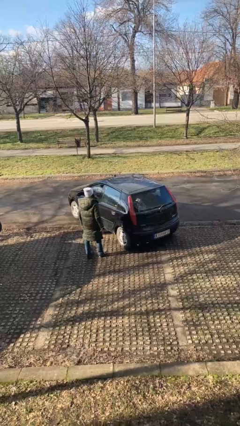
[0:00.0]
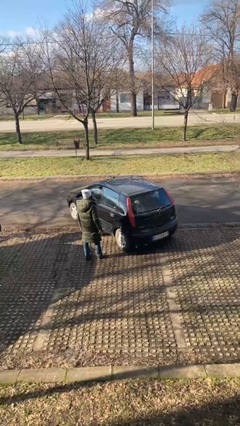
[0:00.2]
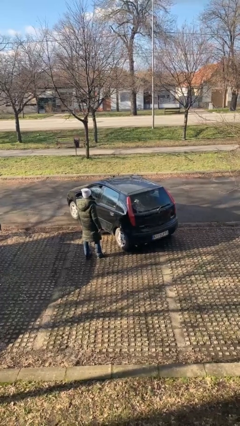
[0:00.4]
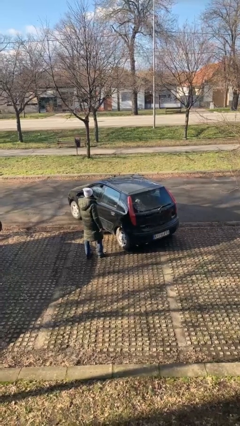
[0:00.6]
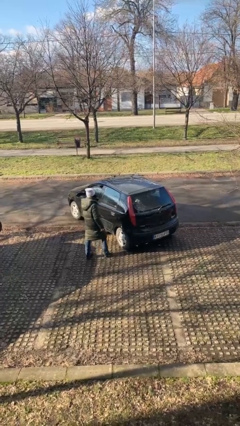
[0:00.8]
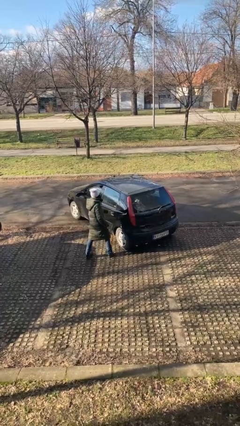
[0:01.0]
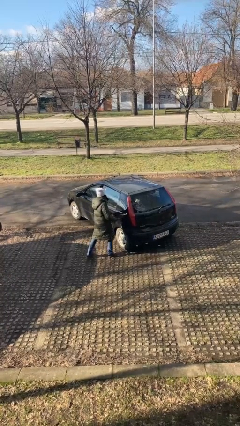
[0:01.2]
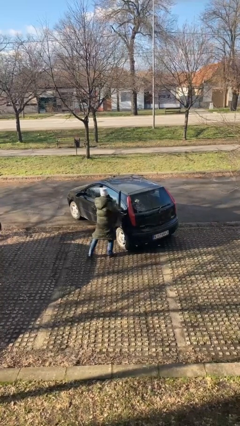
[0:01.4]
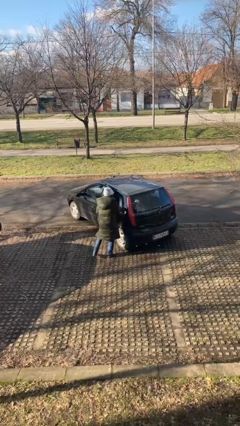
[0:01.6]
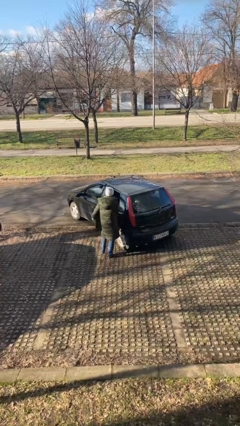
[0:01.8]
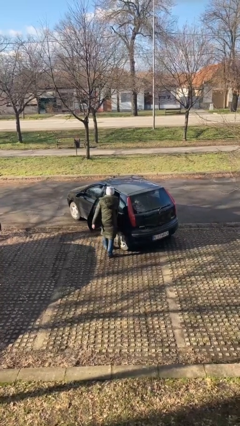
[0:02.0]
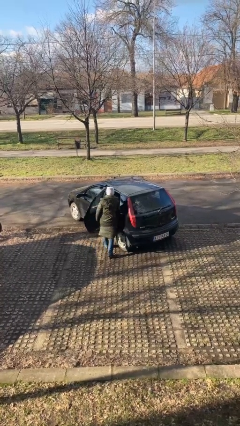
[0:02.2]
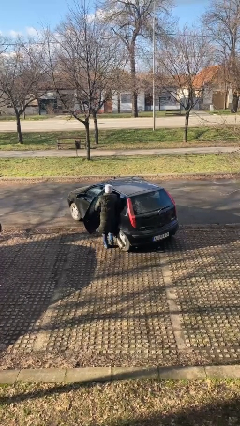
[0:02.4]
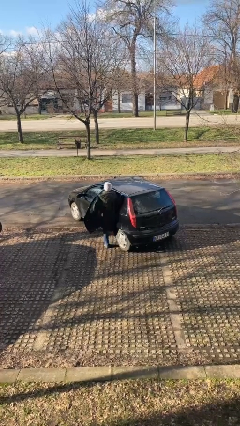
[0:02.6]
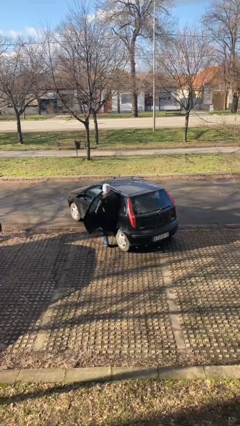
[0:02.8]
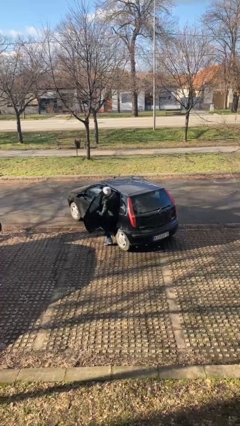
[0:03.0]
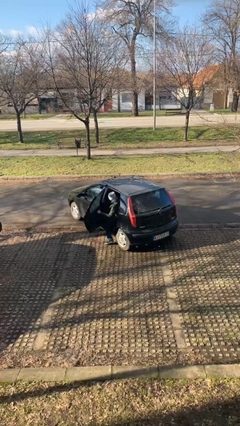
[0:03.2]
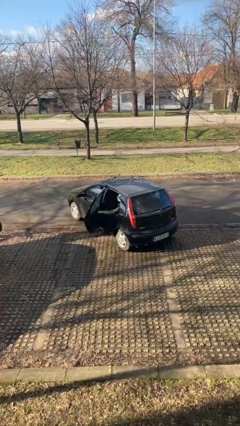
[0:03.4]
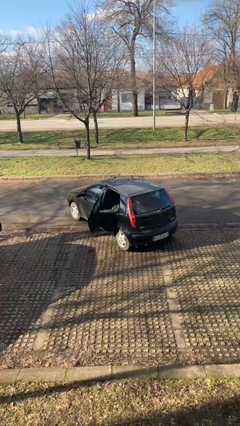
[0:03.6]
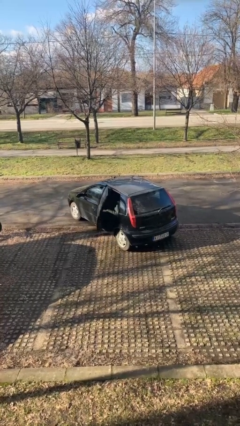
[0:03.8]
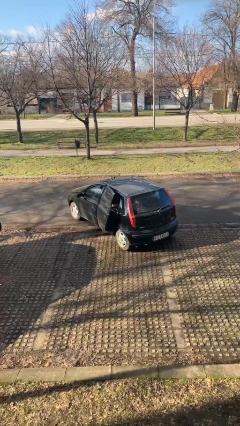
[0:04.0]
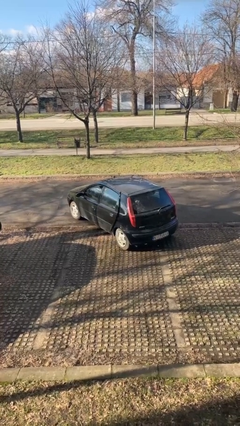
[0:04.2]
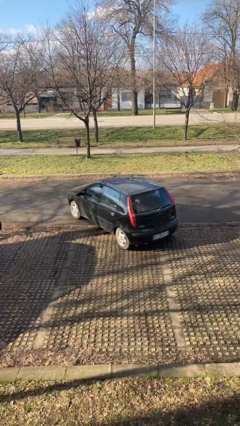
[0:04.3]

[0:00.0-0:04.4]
car picks up person

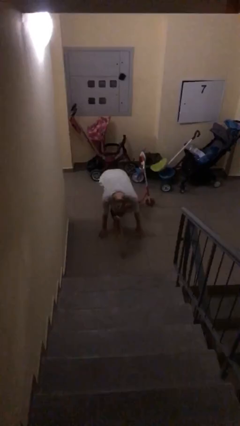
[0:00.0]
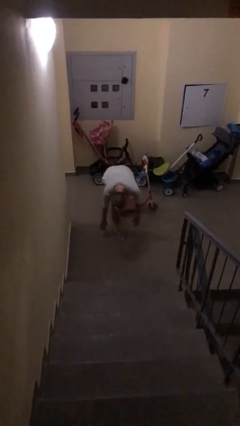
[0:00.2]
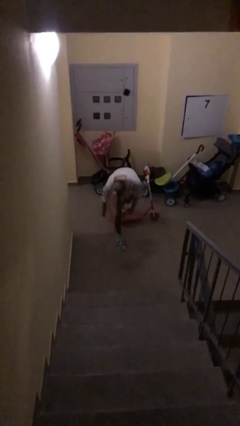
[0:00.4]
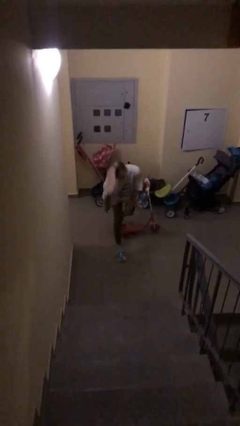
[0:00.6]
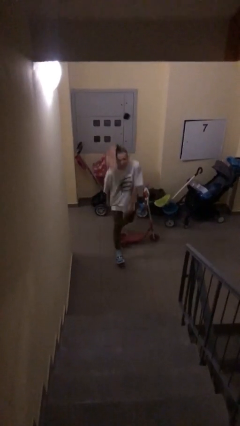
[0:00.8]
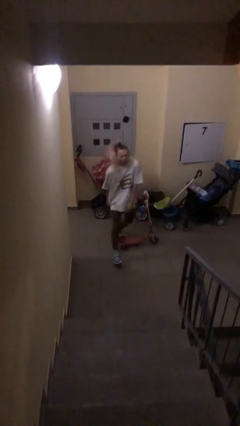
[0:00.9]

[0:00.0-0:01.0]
person stands up from floor

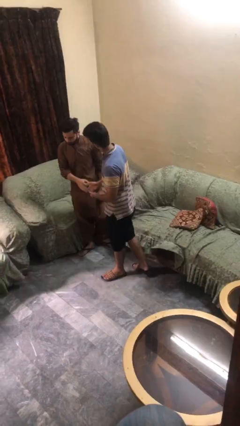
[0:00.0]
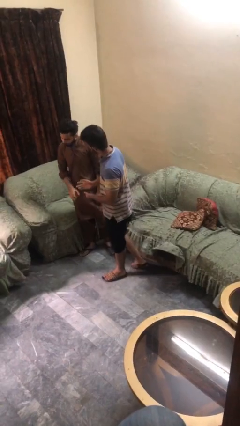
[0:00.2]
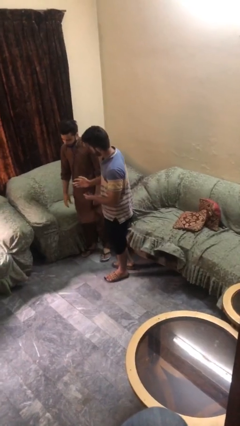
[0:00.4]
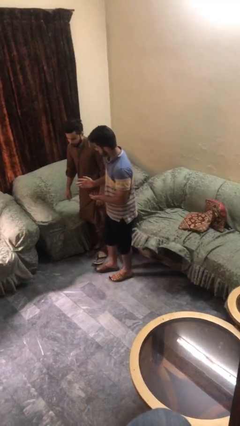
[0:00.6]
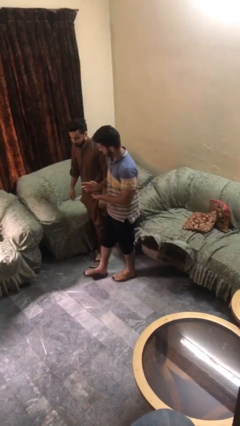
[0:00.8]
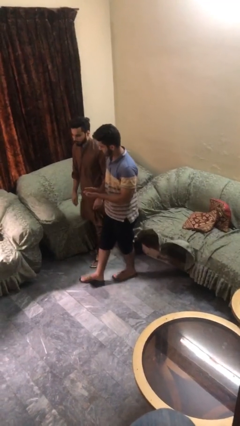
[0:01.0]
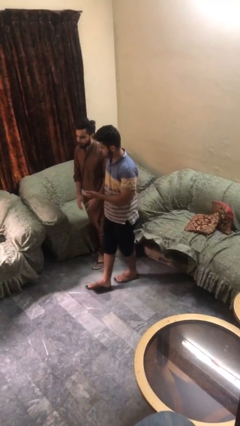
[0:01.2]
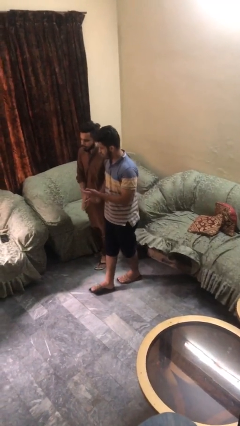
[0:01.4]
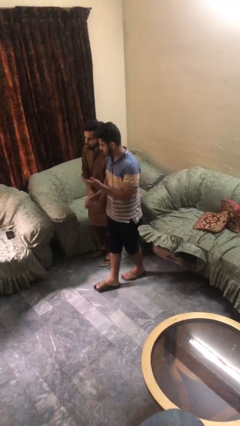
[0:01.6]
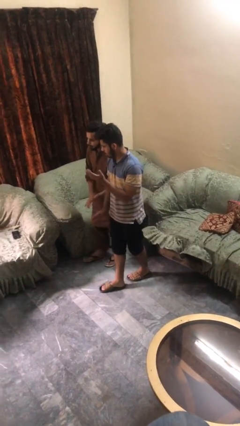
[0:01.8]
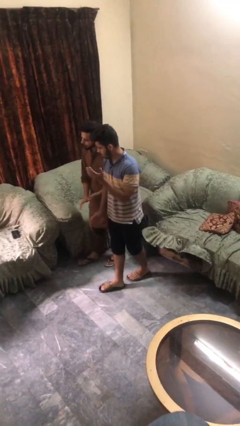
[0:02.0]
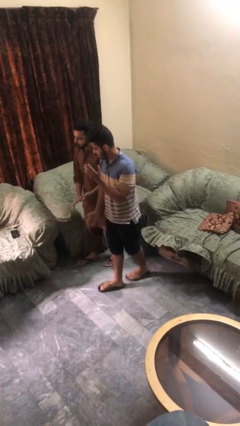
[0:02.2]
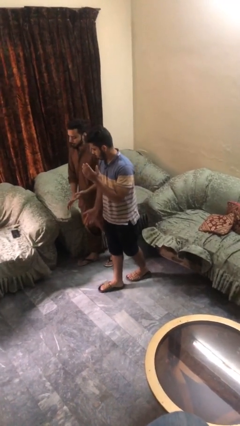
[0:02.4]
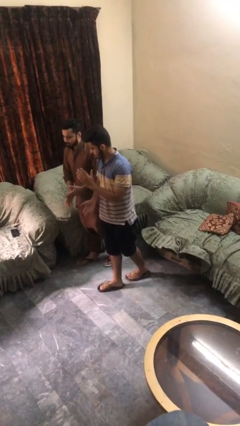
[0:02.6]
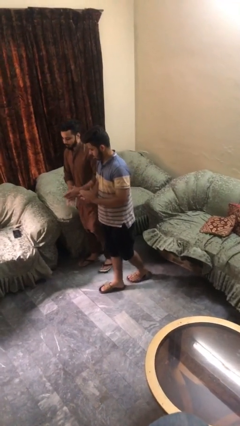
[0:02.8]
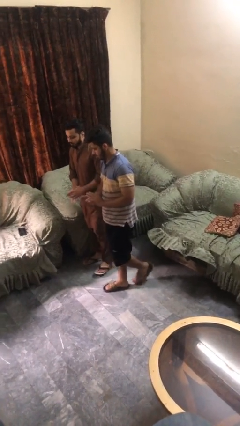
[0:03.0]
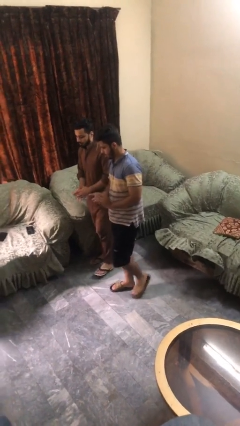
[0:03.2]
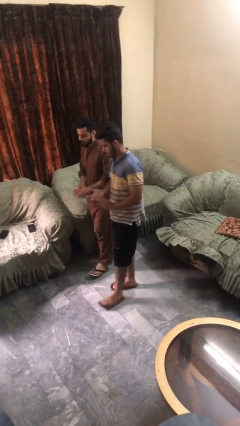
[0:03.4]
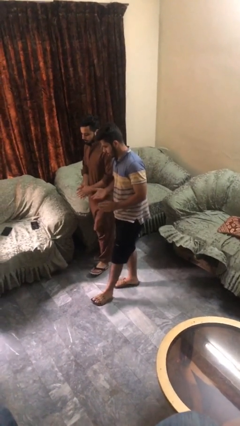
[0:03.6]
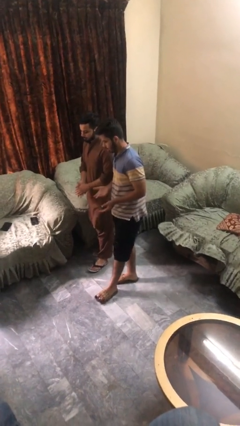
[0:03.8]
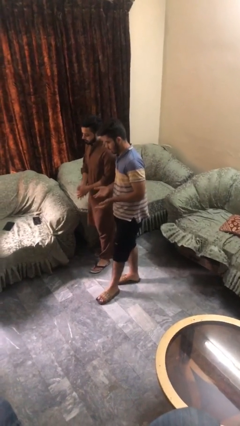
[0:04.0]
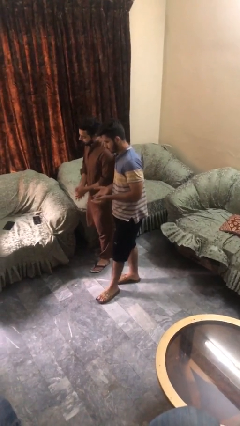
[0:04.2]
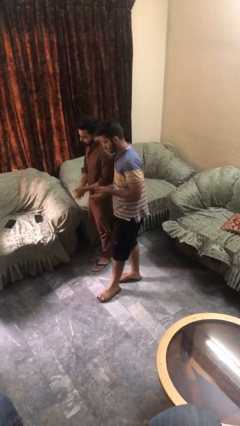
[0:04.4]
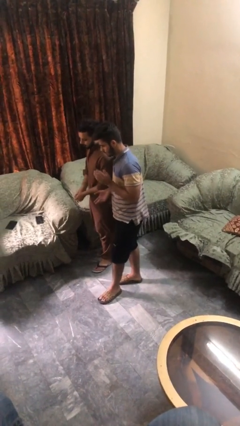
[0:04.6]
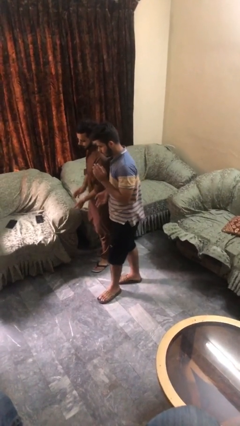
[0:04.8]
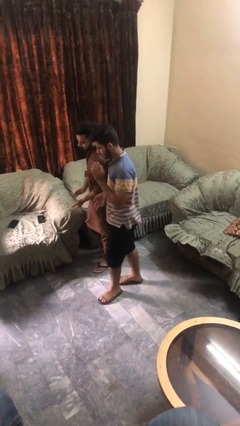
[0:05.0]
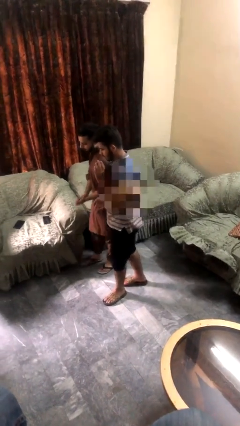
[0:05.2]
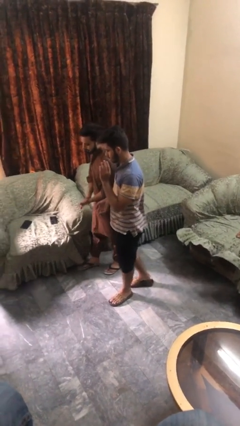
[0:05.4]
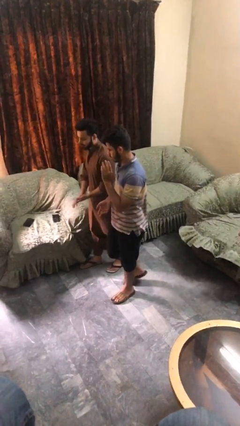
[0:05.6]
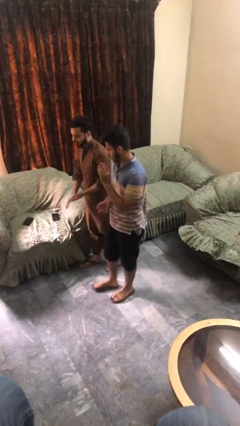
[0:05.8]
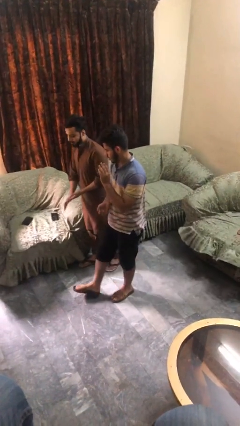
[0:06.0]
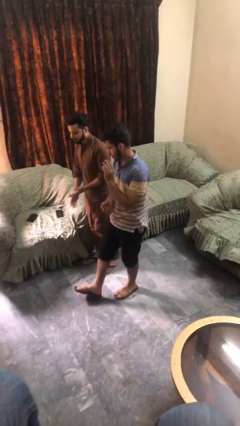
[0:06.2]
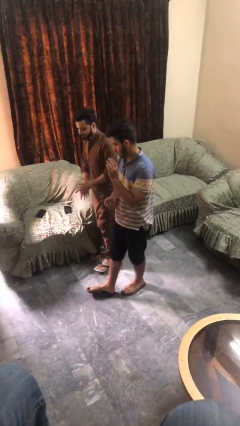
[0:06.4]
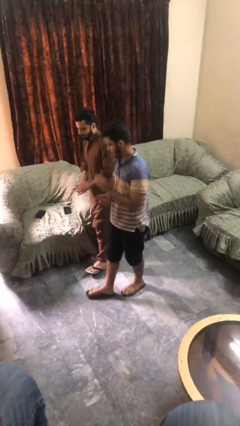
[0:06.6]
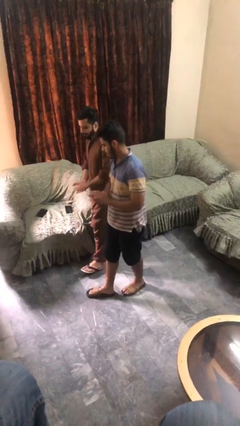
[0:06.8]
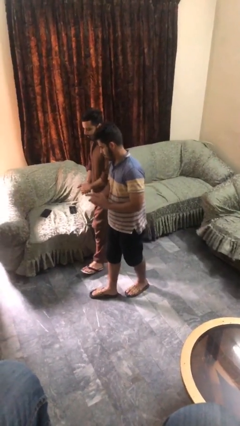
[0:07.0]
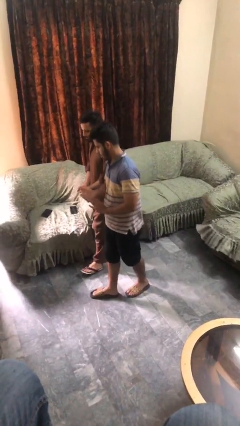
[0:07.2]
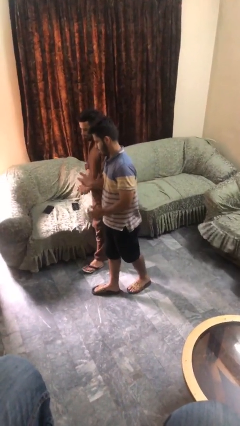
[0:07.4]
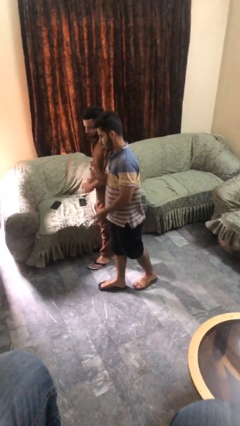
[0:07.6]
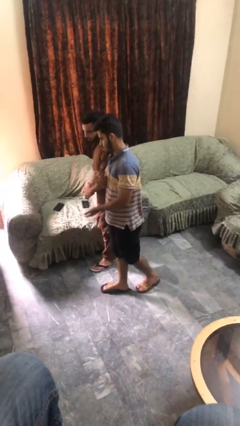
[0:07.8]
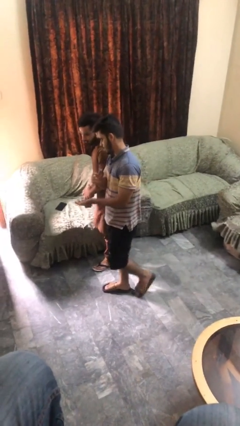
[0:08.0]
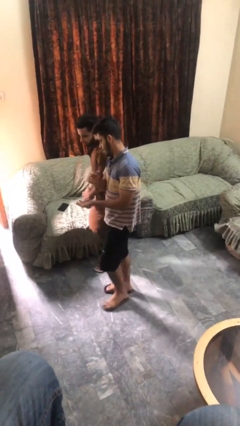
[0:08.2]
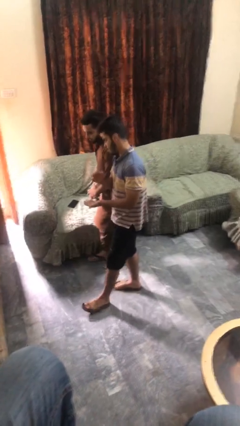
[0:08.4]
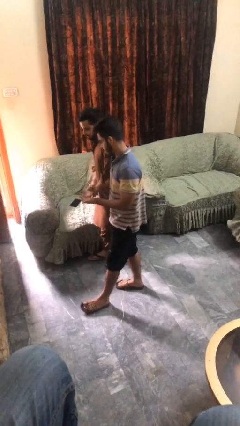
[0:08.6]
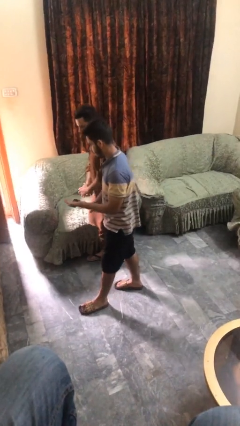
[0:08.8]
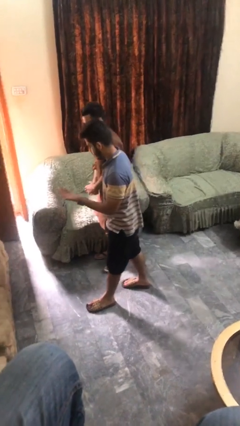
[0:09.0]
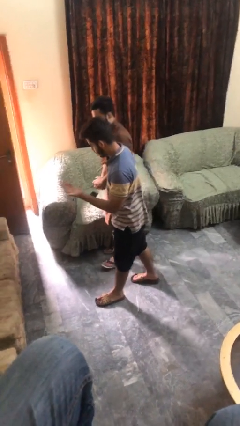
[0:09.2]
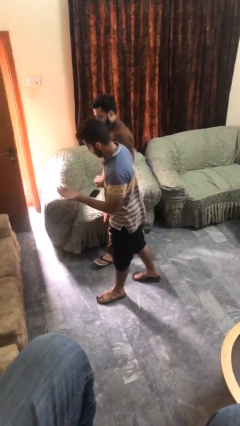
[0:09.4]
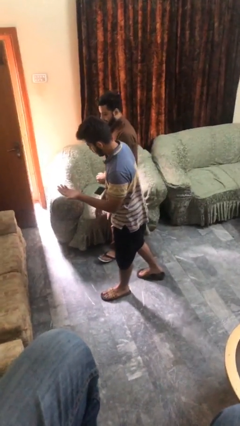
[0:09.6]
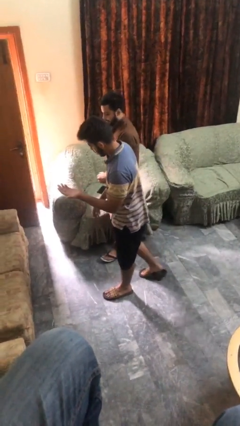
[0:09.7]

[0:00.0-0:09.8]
person talks to person

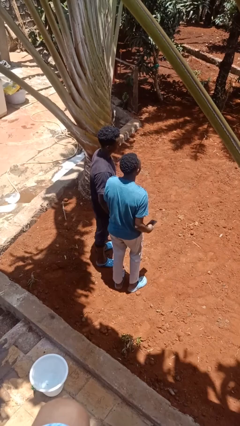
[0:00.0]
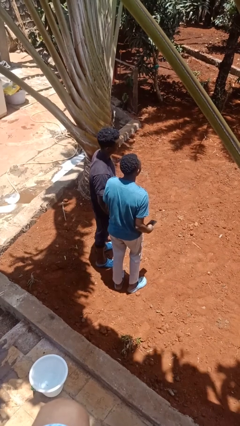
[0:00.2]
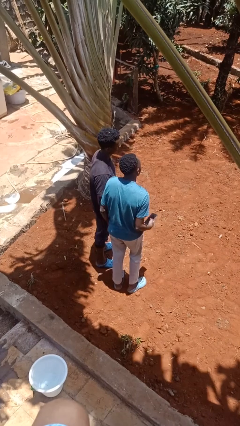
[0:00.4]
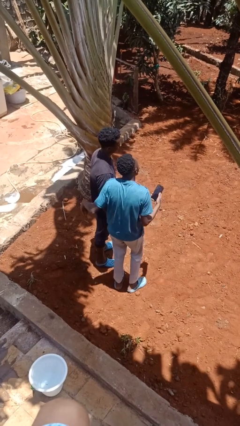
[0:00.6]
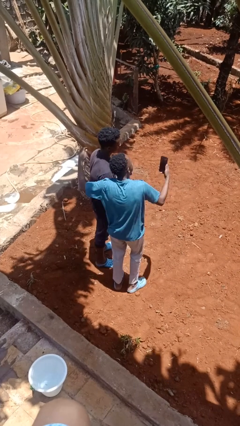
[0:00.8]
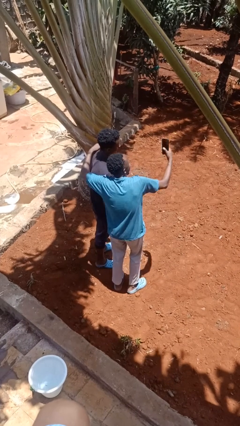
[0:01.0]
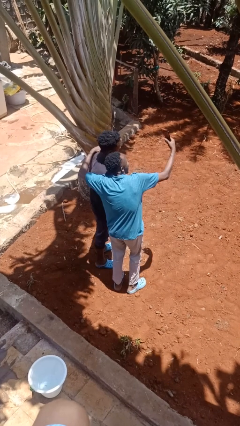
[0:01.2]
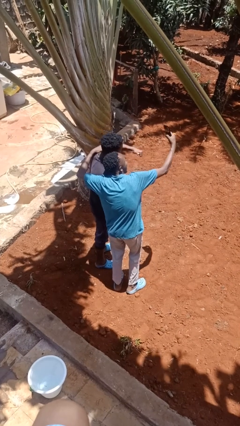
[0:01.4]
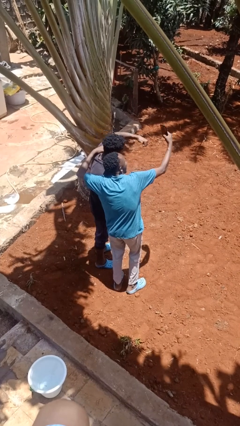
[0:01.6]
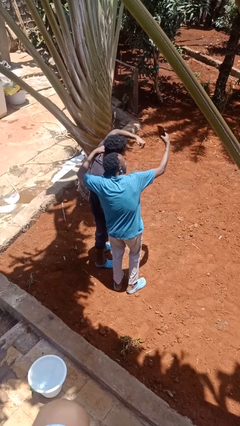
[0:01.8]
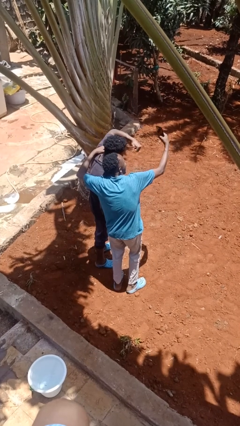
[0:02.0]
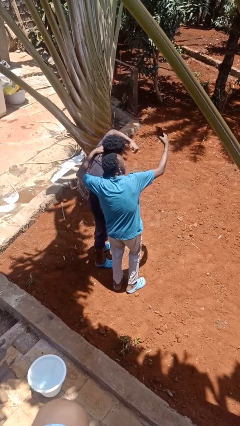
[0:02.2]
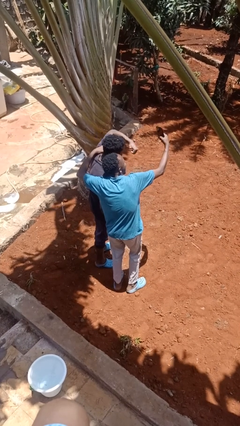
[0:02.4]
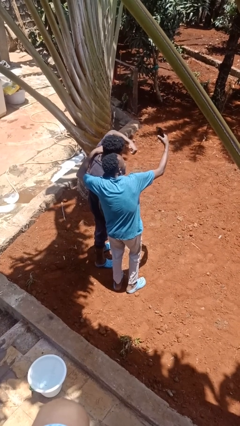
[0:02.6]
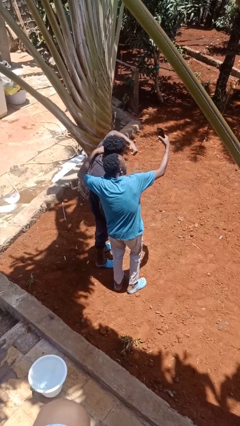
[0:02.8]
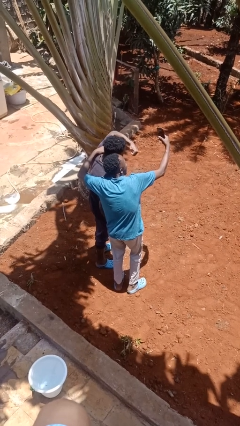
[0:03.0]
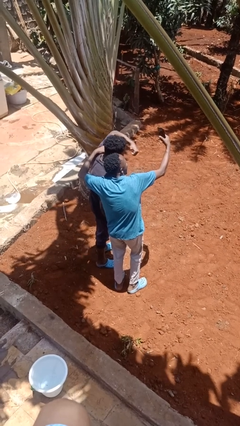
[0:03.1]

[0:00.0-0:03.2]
person takes selfie with person
